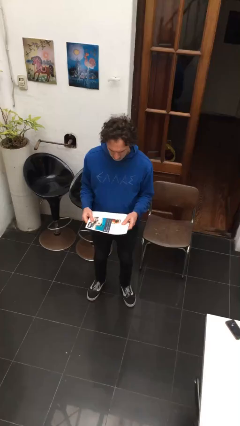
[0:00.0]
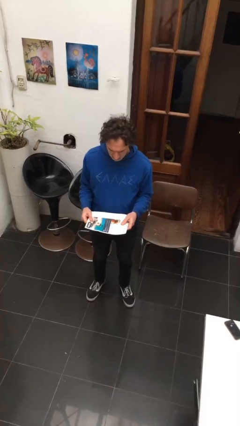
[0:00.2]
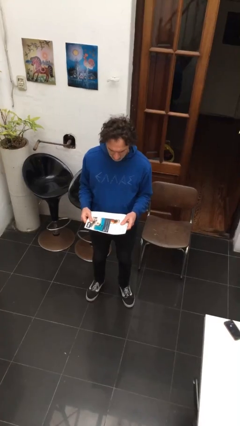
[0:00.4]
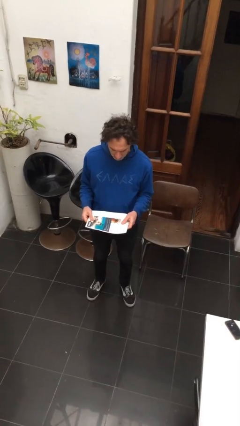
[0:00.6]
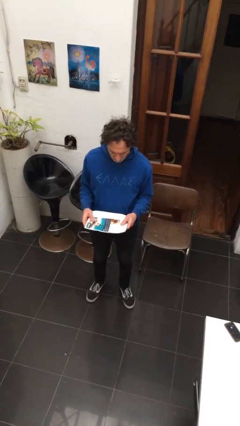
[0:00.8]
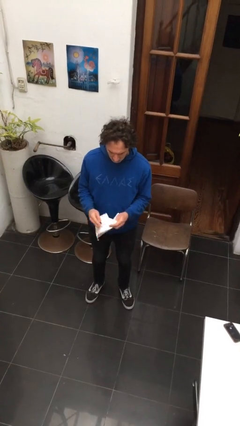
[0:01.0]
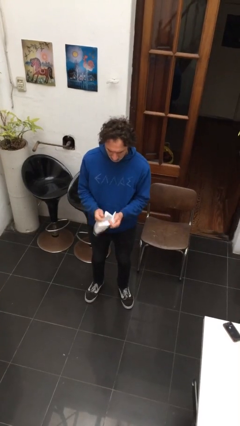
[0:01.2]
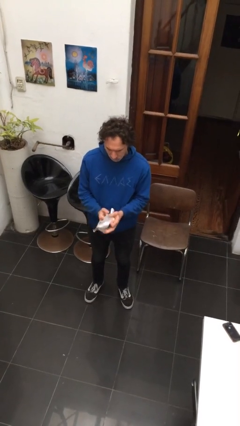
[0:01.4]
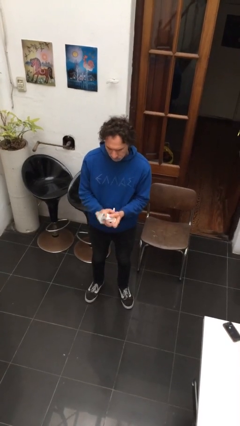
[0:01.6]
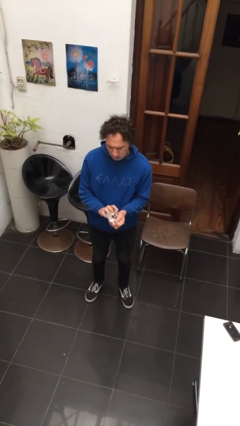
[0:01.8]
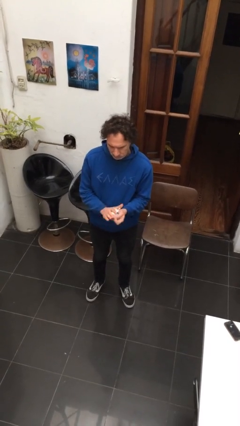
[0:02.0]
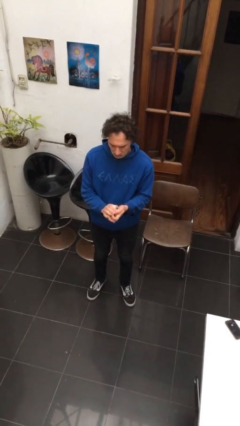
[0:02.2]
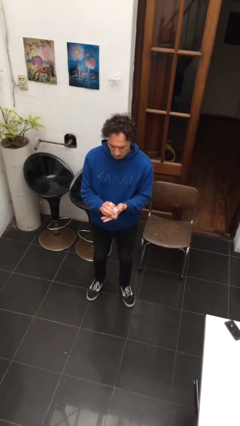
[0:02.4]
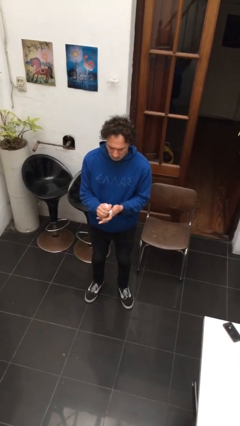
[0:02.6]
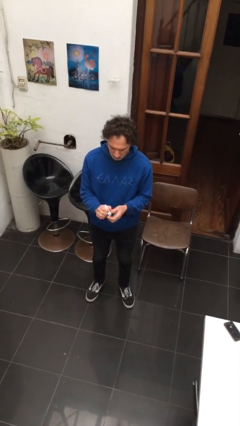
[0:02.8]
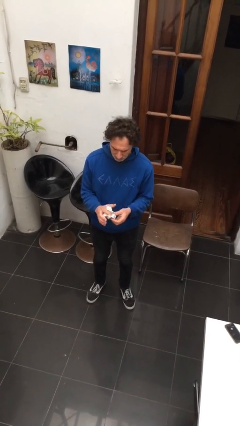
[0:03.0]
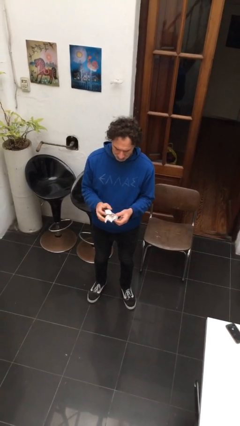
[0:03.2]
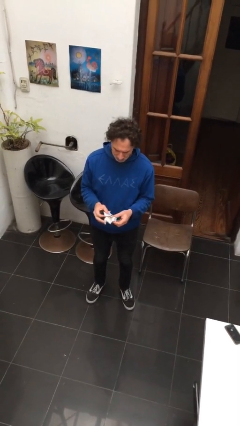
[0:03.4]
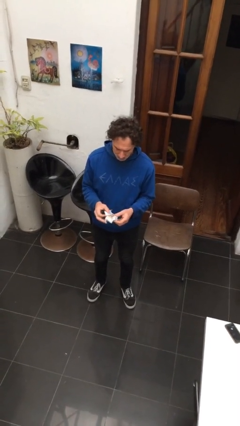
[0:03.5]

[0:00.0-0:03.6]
person crumples paper

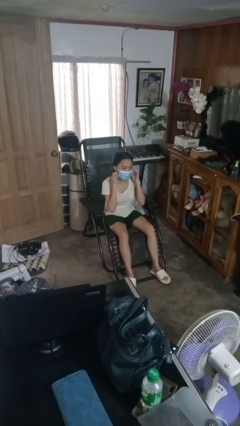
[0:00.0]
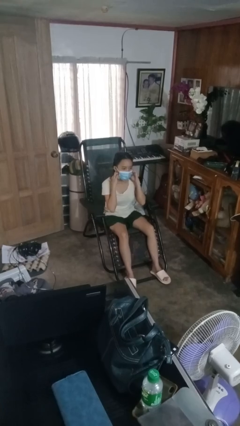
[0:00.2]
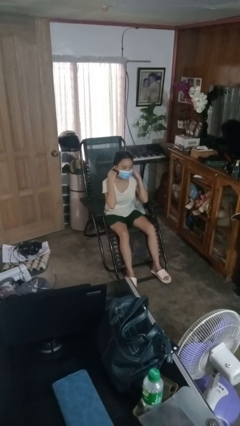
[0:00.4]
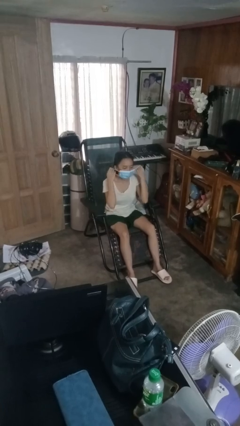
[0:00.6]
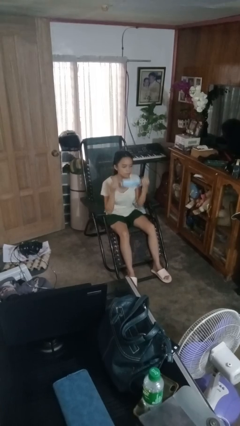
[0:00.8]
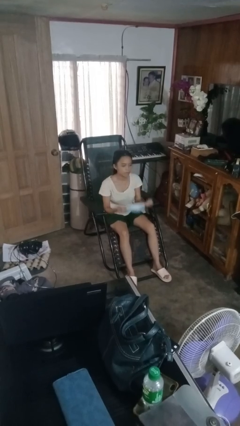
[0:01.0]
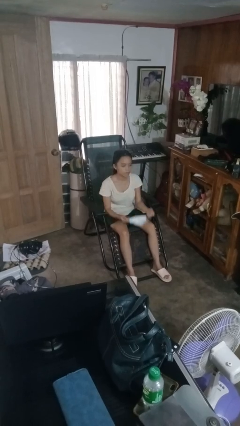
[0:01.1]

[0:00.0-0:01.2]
person takes off facemask

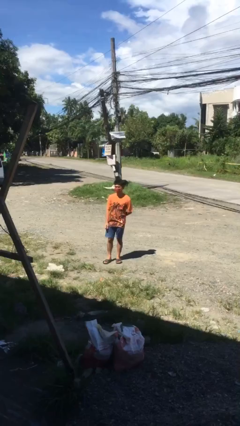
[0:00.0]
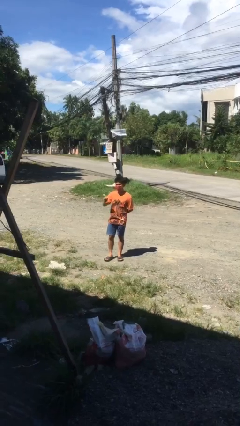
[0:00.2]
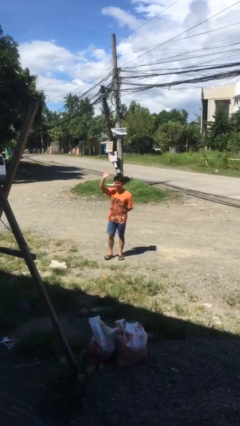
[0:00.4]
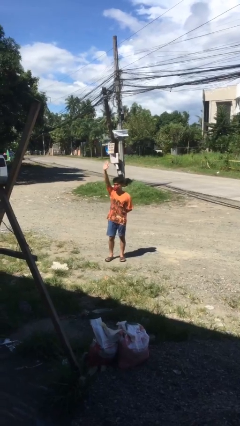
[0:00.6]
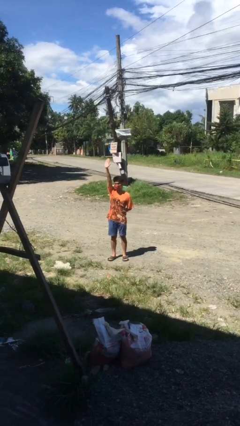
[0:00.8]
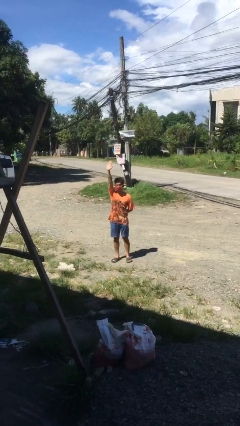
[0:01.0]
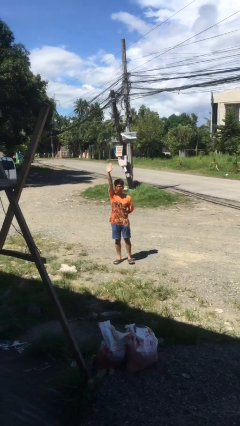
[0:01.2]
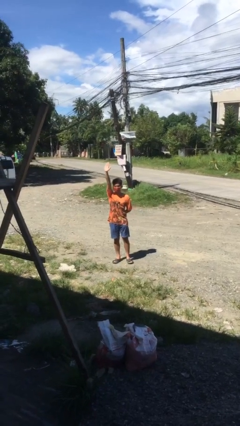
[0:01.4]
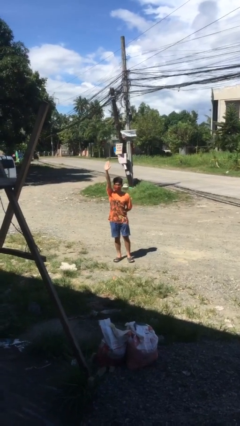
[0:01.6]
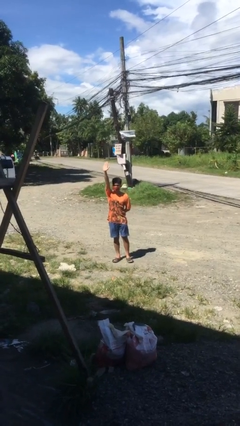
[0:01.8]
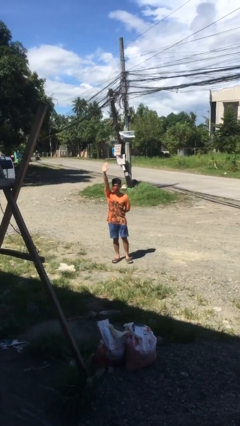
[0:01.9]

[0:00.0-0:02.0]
person gestures raise hand

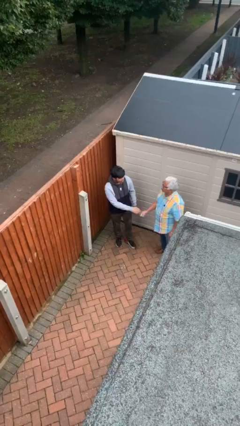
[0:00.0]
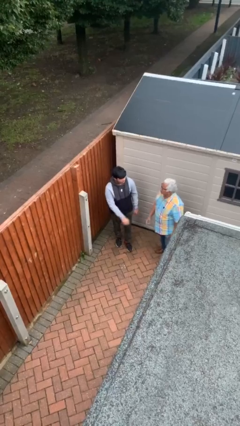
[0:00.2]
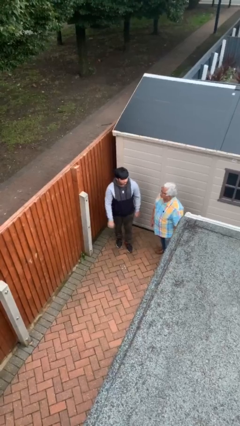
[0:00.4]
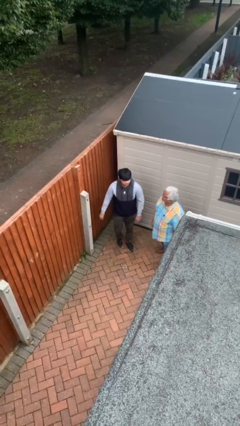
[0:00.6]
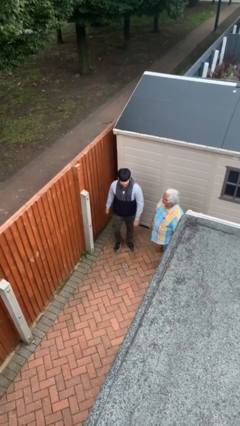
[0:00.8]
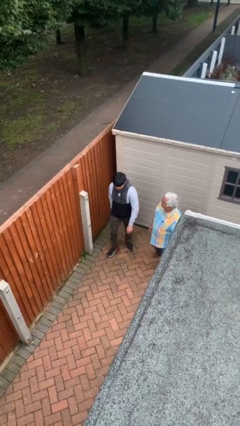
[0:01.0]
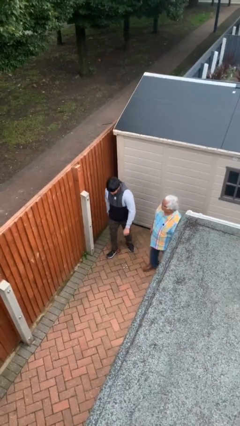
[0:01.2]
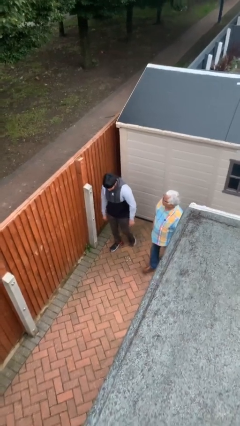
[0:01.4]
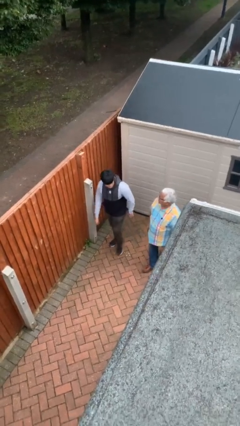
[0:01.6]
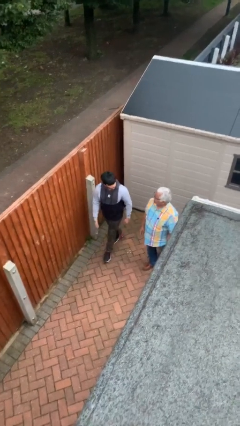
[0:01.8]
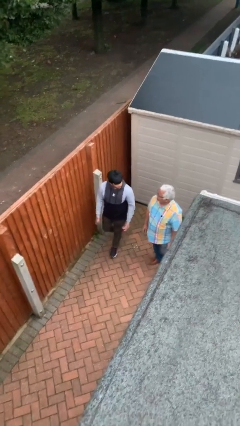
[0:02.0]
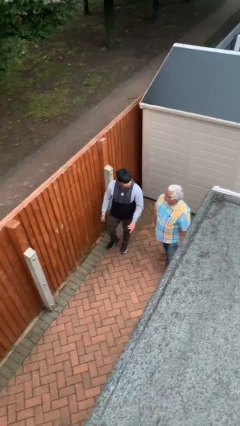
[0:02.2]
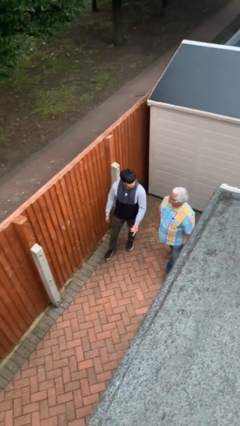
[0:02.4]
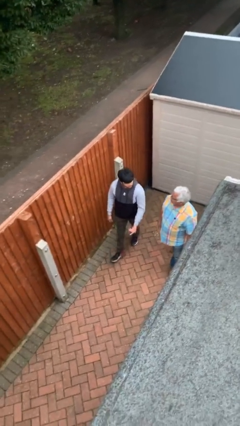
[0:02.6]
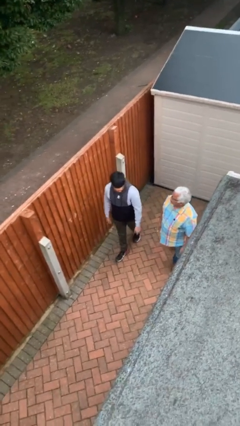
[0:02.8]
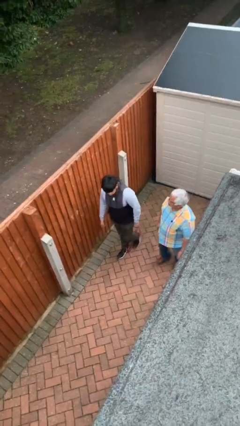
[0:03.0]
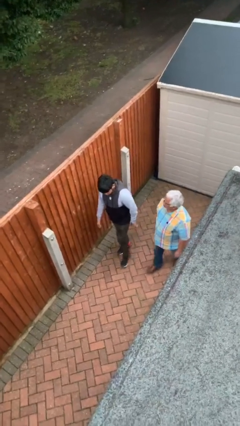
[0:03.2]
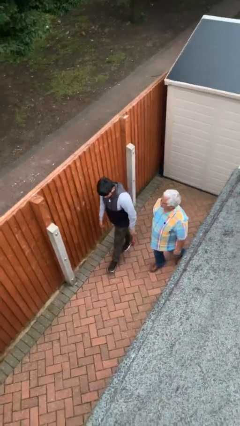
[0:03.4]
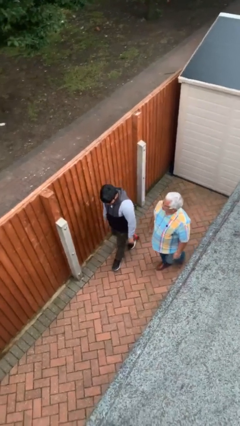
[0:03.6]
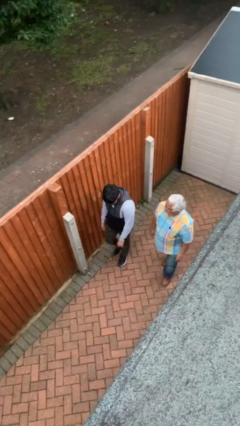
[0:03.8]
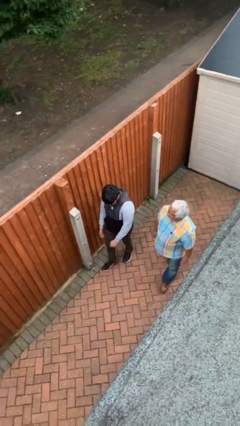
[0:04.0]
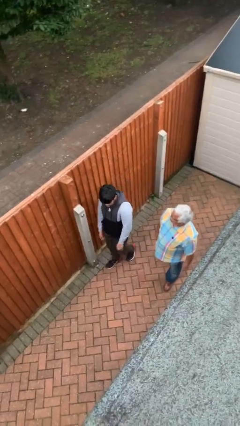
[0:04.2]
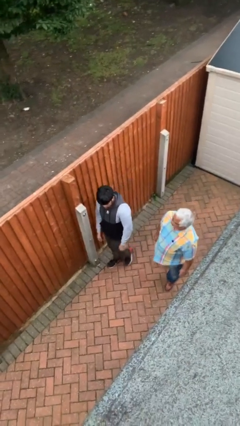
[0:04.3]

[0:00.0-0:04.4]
person talks to person

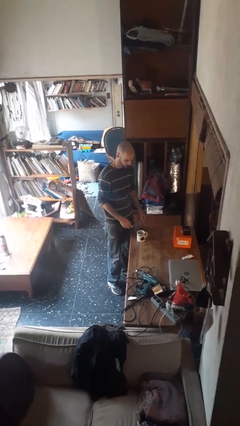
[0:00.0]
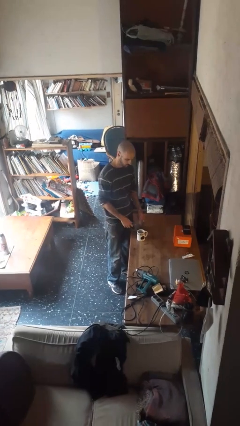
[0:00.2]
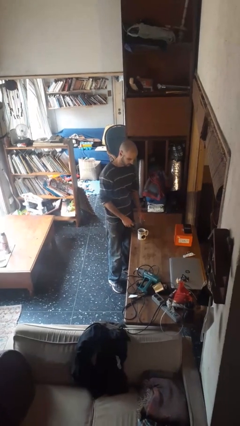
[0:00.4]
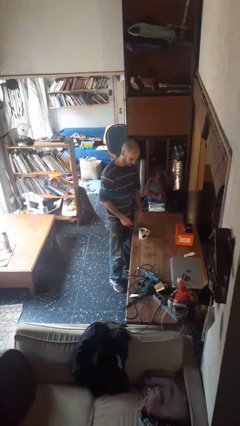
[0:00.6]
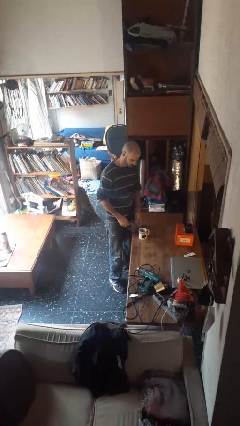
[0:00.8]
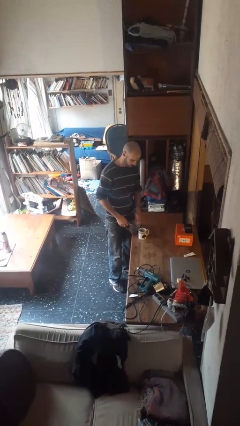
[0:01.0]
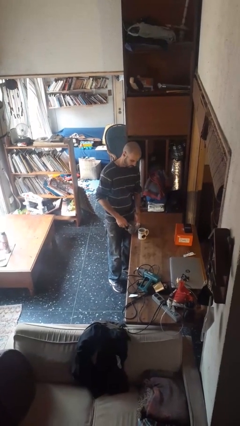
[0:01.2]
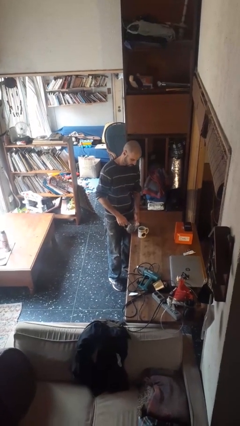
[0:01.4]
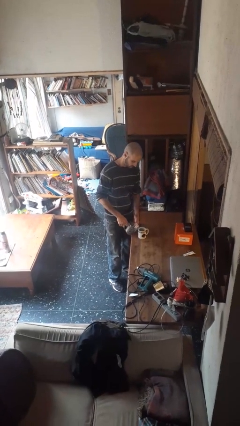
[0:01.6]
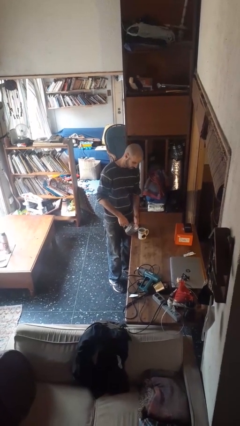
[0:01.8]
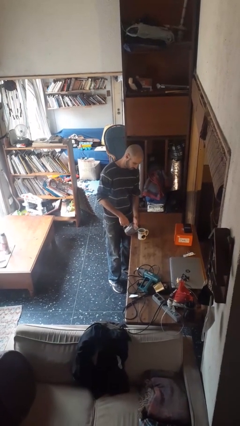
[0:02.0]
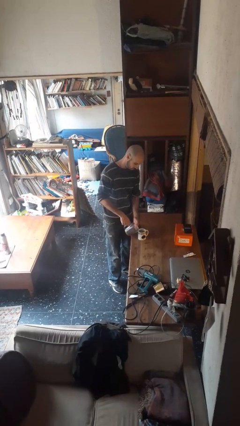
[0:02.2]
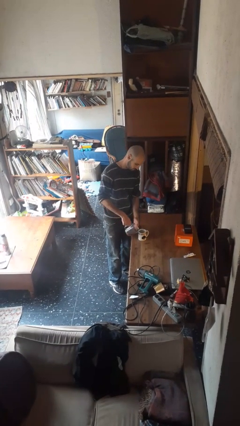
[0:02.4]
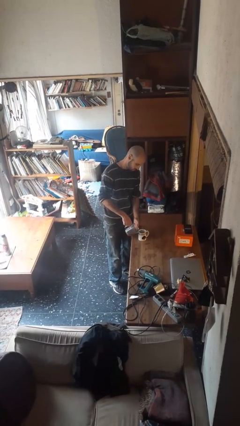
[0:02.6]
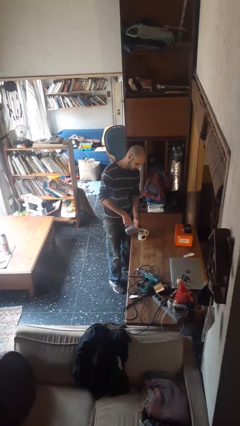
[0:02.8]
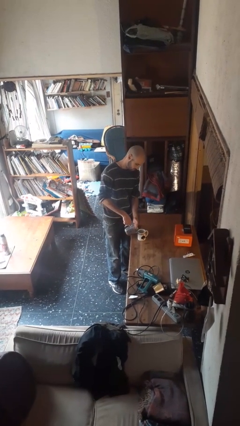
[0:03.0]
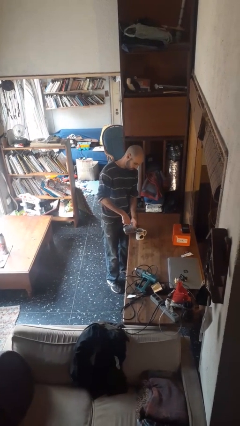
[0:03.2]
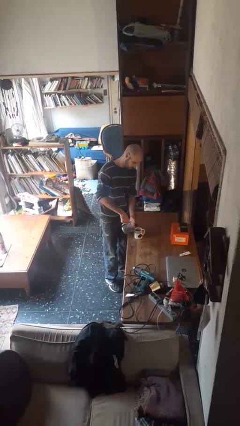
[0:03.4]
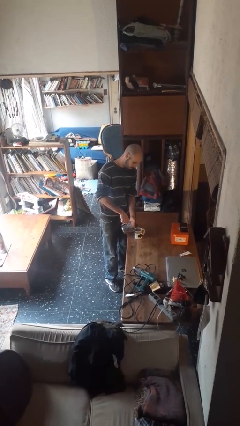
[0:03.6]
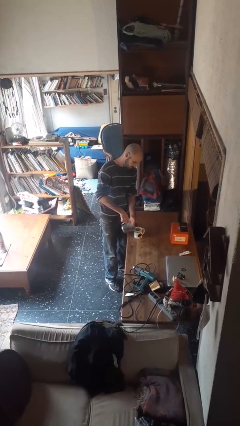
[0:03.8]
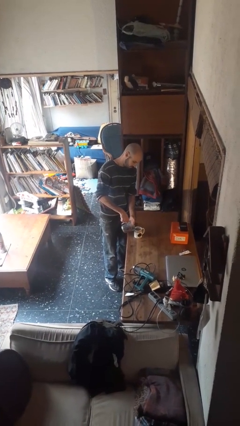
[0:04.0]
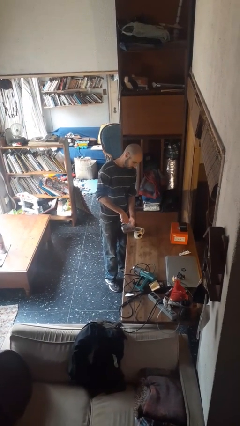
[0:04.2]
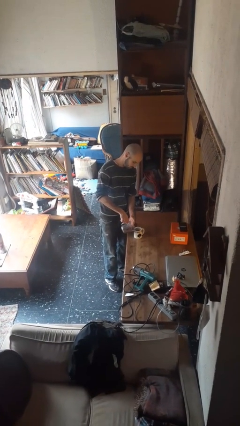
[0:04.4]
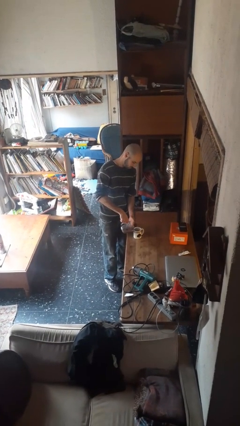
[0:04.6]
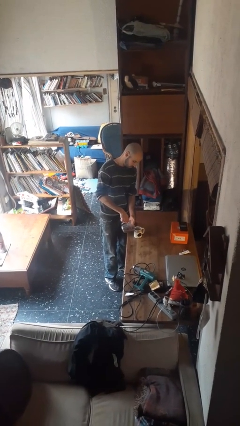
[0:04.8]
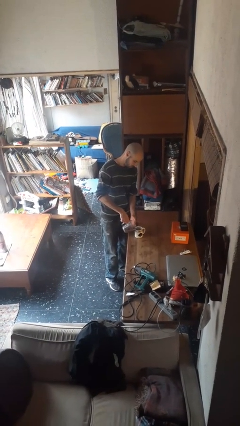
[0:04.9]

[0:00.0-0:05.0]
person pours coffee into mug

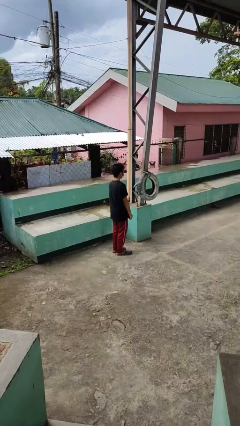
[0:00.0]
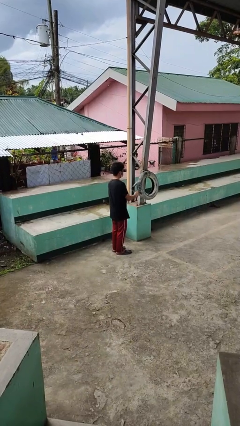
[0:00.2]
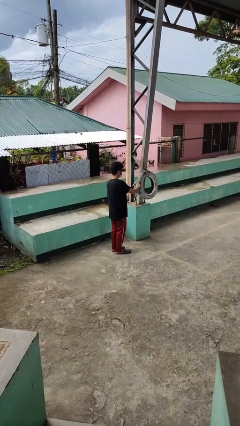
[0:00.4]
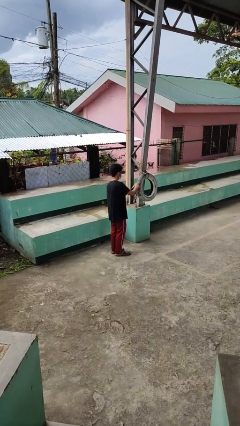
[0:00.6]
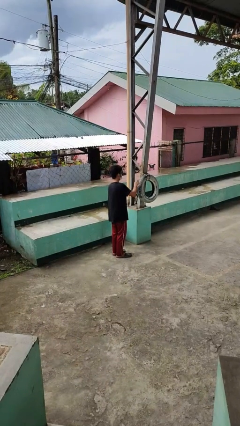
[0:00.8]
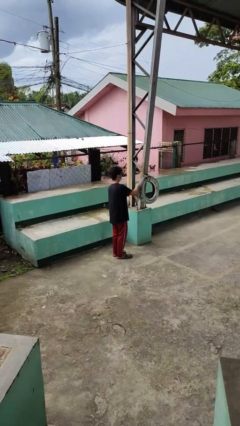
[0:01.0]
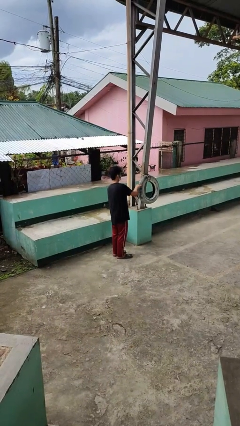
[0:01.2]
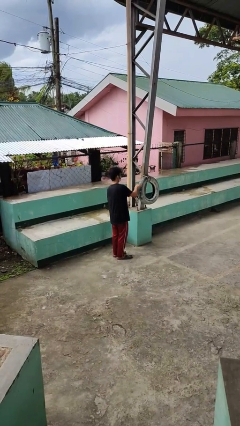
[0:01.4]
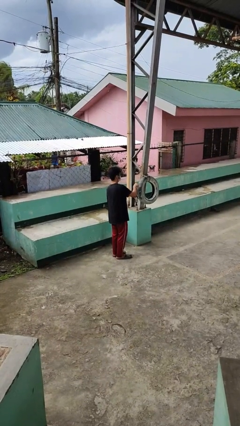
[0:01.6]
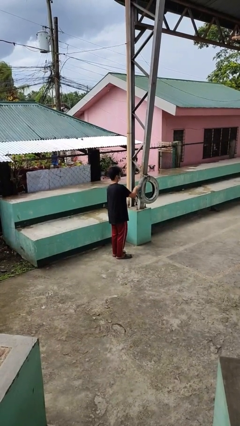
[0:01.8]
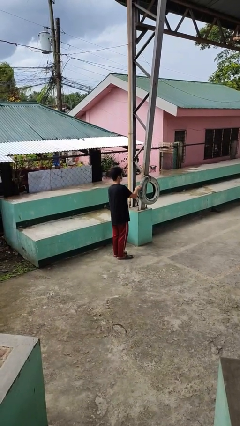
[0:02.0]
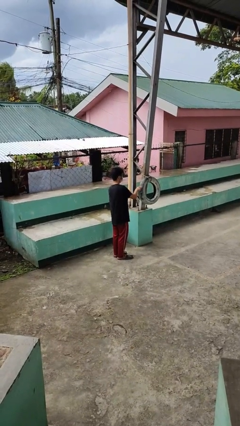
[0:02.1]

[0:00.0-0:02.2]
person taps object with finger
